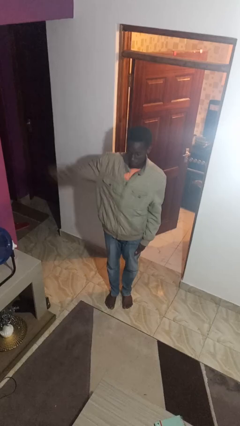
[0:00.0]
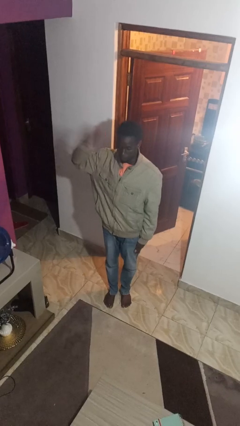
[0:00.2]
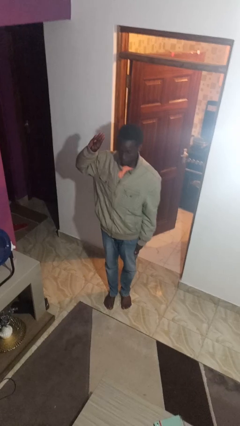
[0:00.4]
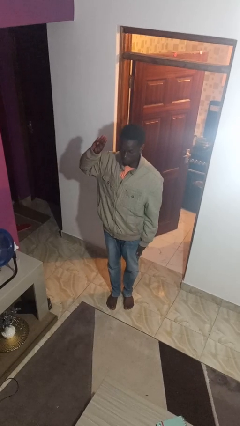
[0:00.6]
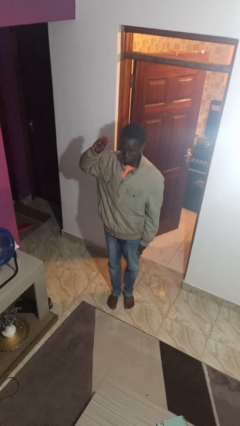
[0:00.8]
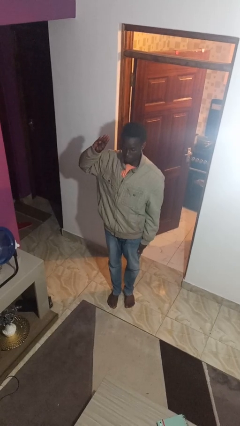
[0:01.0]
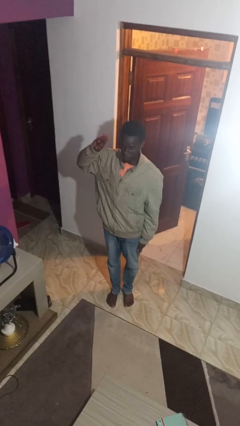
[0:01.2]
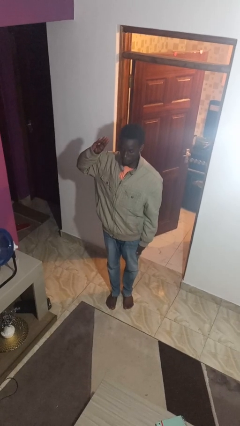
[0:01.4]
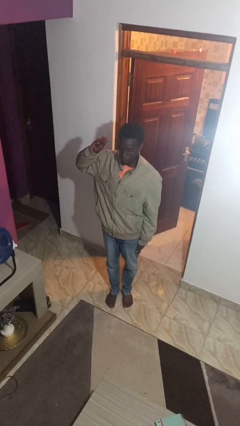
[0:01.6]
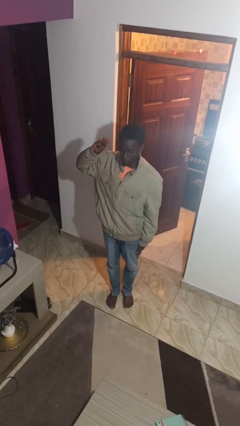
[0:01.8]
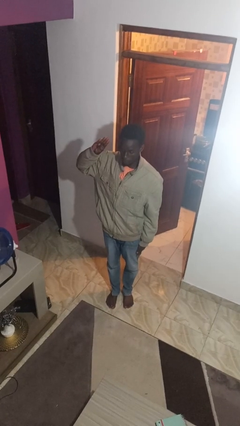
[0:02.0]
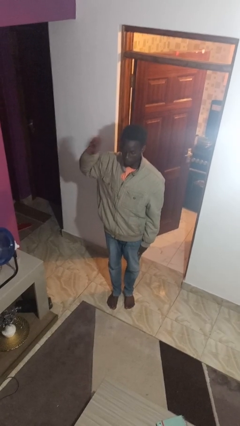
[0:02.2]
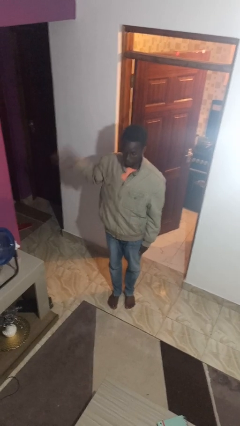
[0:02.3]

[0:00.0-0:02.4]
person salutes

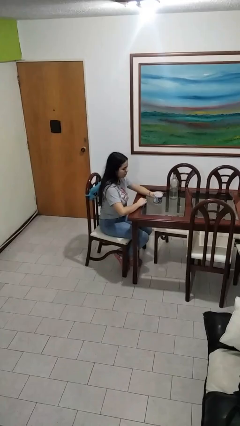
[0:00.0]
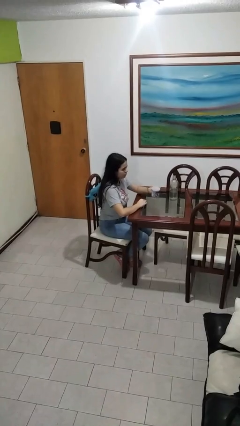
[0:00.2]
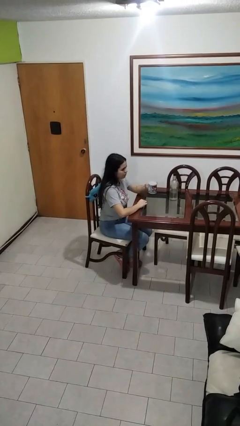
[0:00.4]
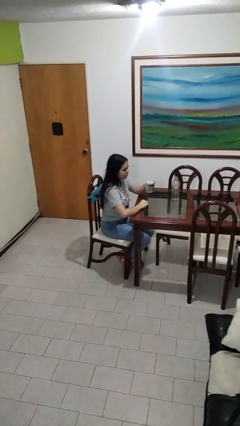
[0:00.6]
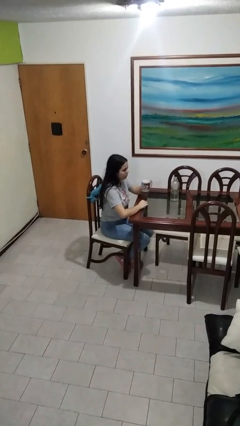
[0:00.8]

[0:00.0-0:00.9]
person picks up object from table

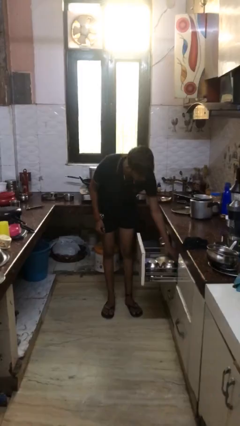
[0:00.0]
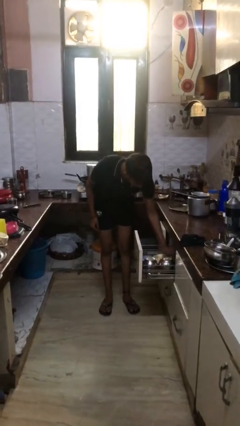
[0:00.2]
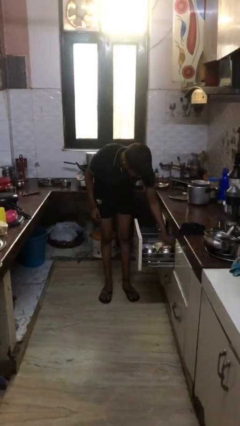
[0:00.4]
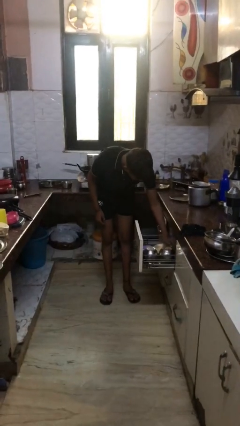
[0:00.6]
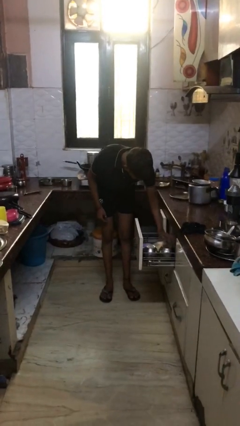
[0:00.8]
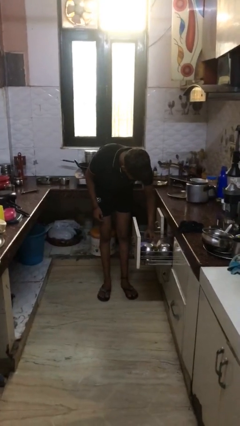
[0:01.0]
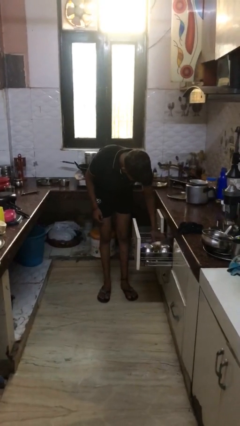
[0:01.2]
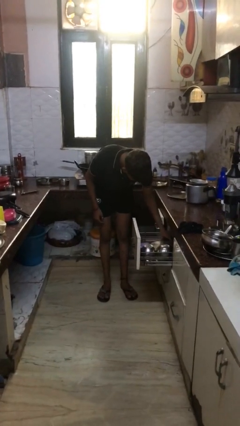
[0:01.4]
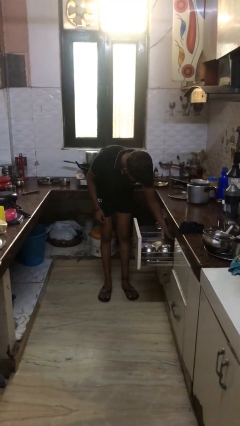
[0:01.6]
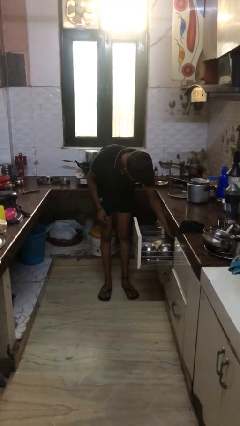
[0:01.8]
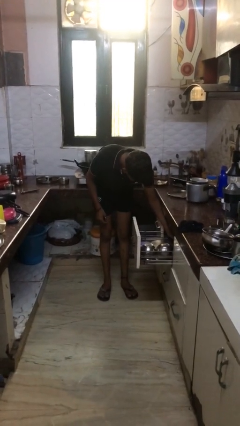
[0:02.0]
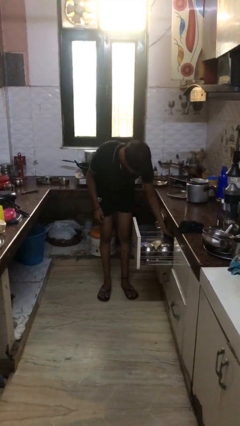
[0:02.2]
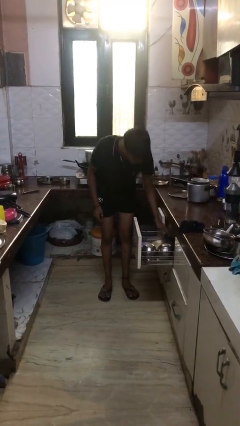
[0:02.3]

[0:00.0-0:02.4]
person searches in kitchen drawer

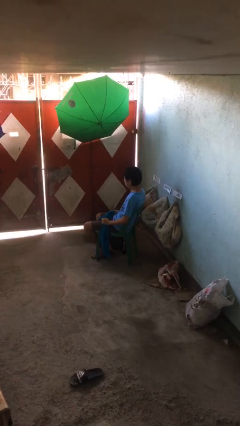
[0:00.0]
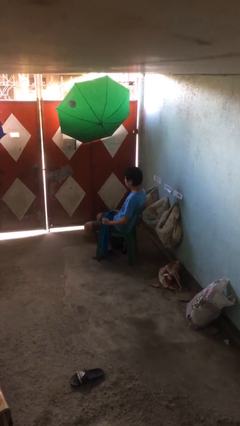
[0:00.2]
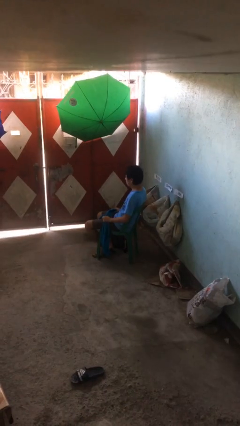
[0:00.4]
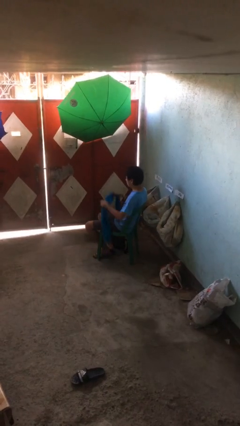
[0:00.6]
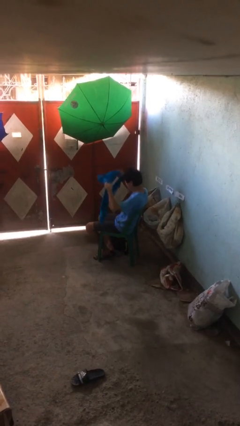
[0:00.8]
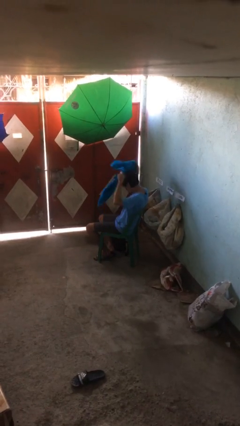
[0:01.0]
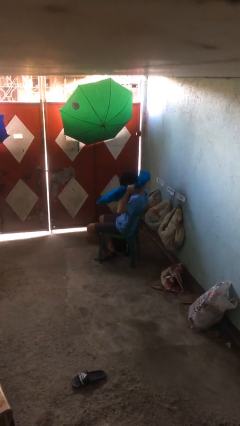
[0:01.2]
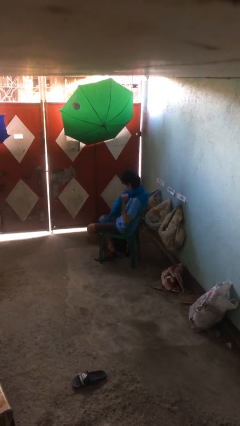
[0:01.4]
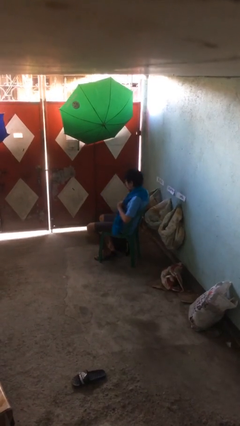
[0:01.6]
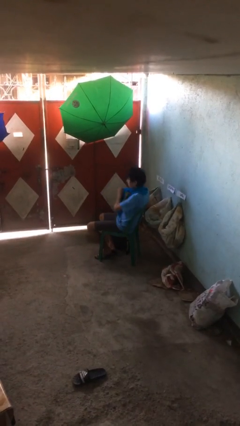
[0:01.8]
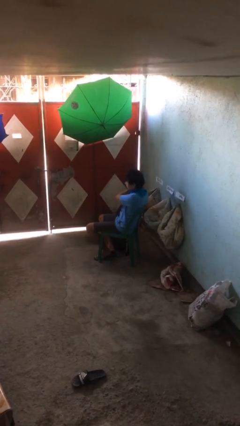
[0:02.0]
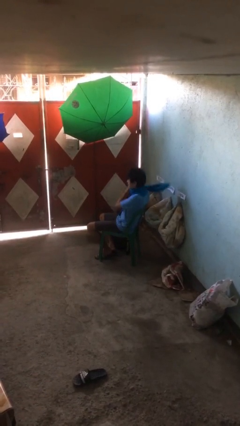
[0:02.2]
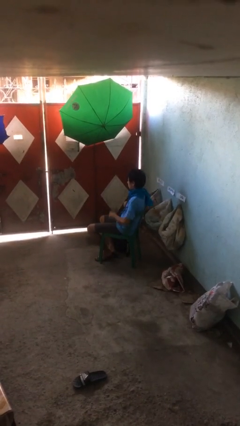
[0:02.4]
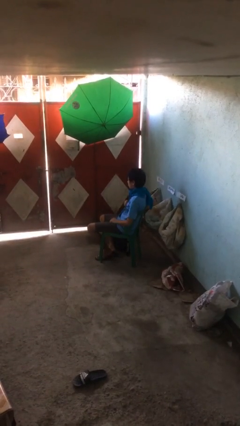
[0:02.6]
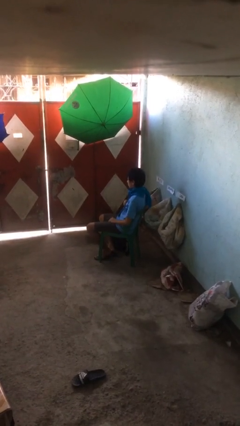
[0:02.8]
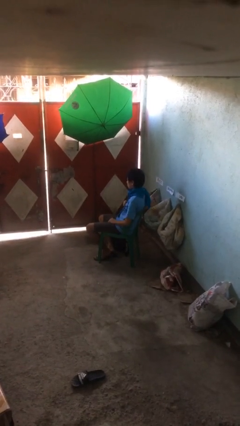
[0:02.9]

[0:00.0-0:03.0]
person puts on scarf

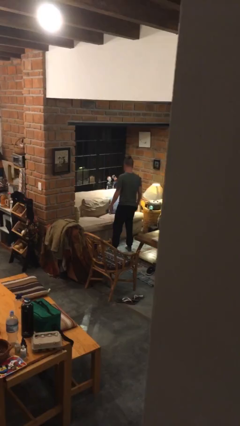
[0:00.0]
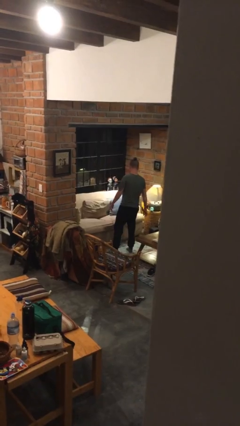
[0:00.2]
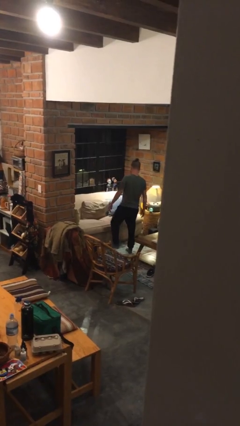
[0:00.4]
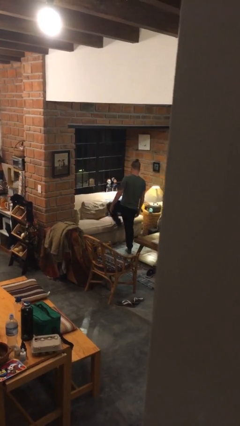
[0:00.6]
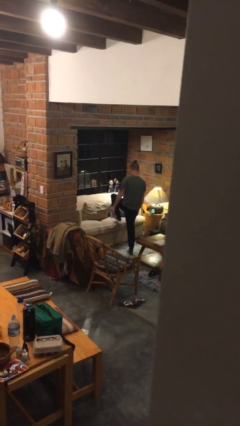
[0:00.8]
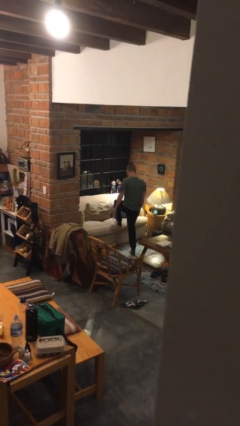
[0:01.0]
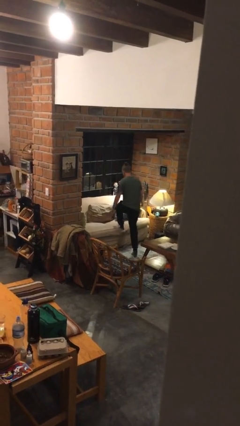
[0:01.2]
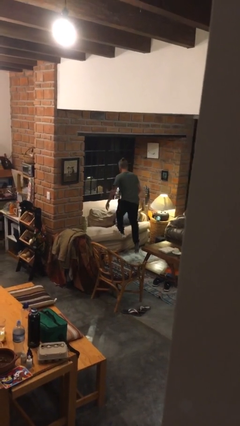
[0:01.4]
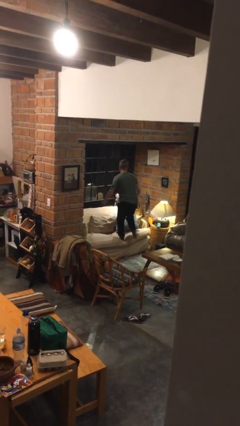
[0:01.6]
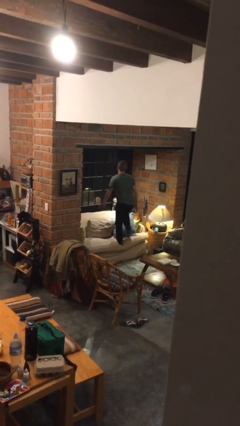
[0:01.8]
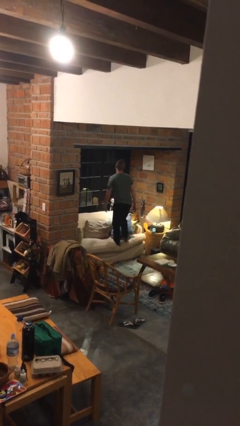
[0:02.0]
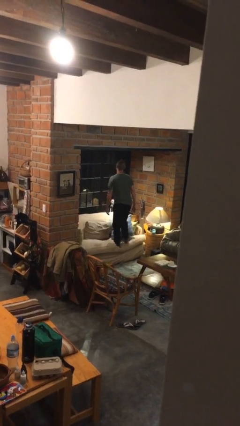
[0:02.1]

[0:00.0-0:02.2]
person climbs on couch

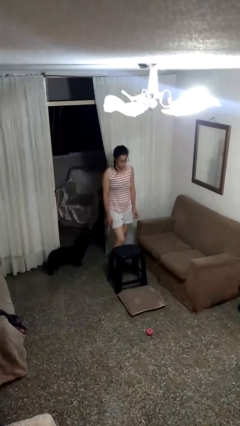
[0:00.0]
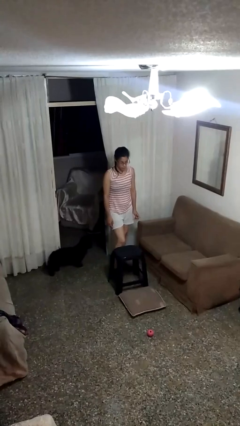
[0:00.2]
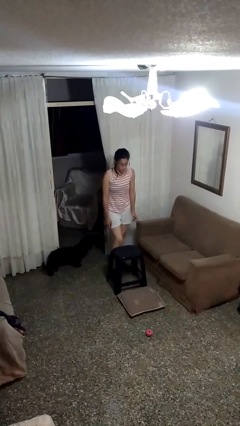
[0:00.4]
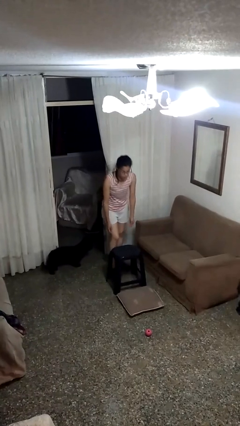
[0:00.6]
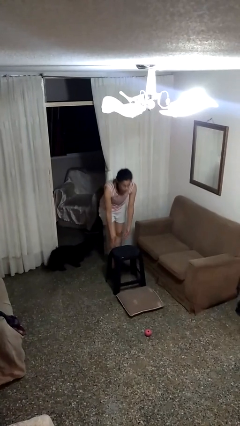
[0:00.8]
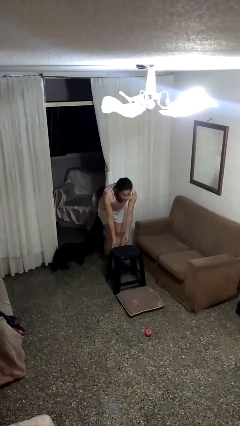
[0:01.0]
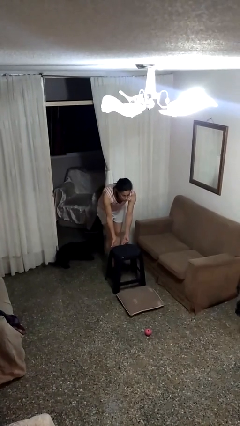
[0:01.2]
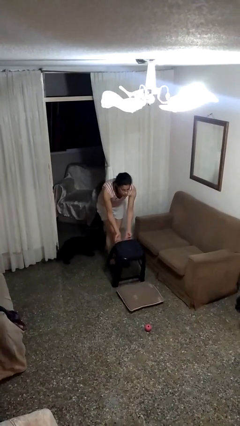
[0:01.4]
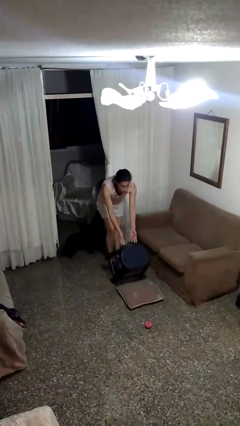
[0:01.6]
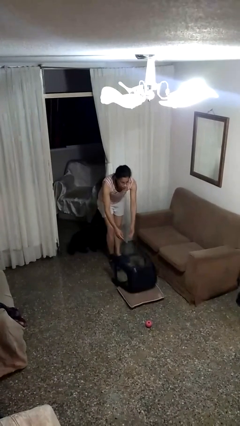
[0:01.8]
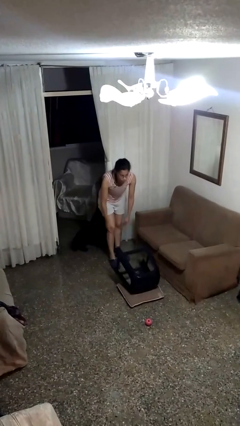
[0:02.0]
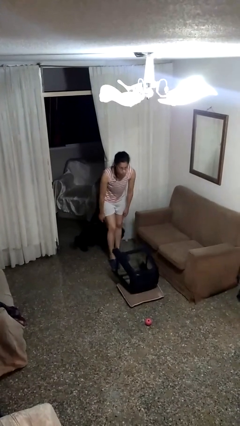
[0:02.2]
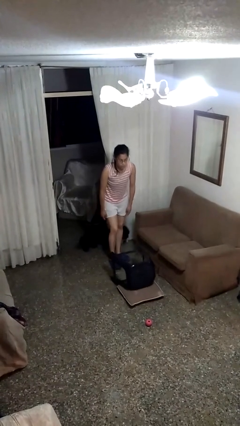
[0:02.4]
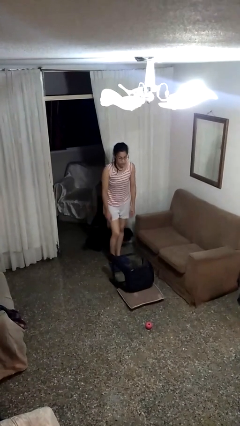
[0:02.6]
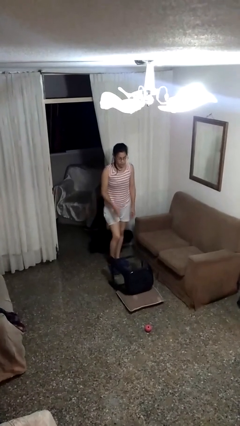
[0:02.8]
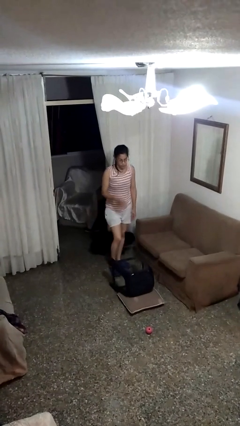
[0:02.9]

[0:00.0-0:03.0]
person knocks over furniture

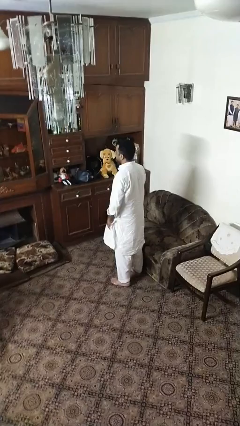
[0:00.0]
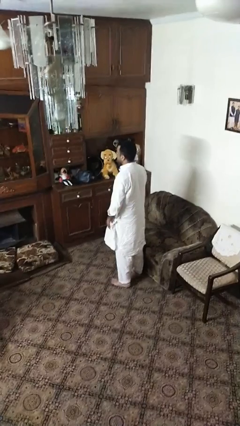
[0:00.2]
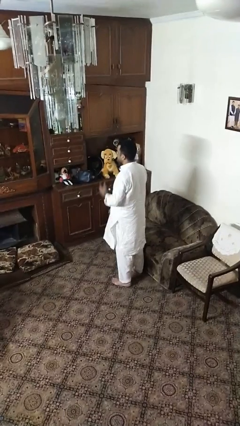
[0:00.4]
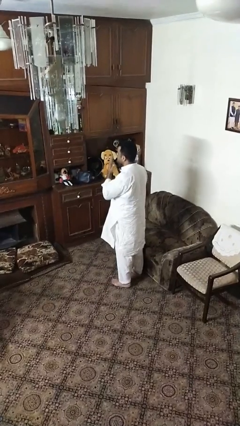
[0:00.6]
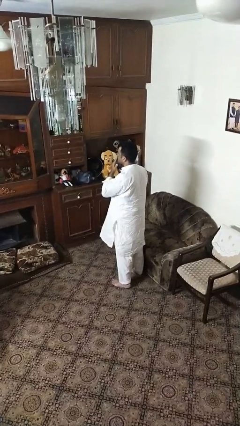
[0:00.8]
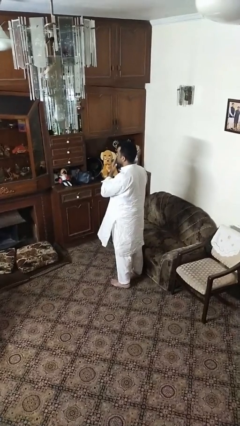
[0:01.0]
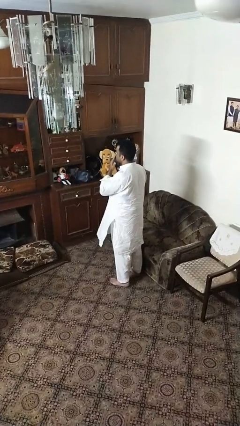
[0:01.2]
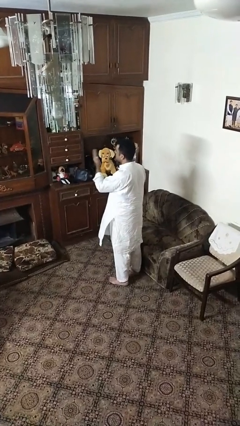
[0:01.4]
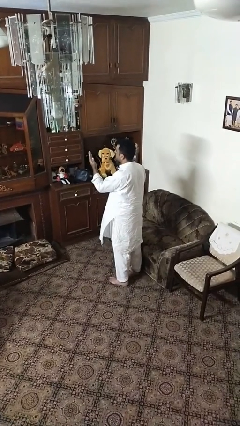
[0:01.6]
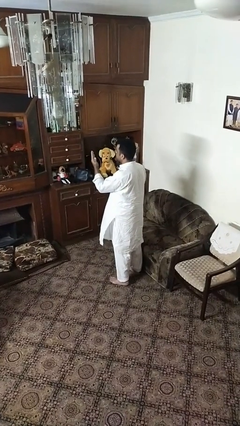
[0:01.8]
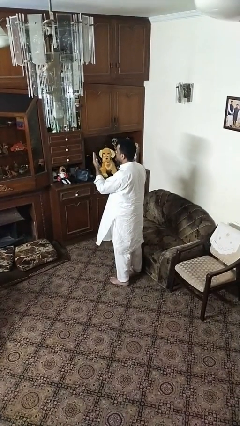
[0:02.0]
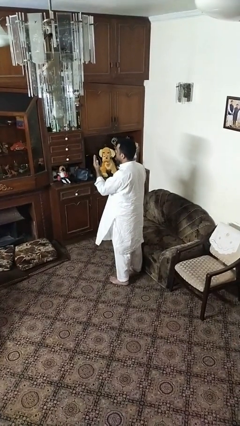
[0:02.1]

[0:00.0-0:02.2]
person gestures blow kiss

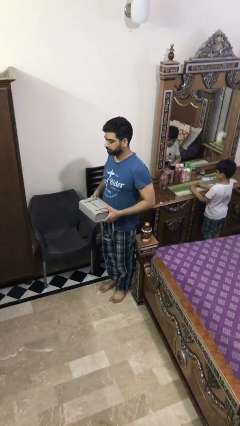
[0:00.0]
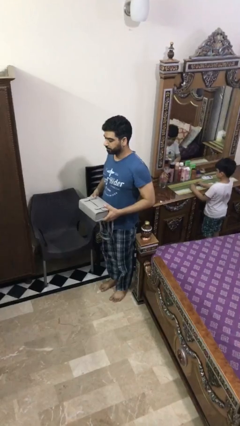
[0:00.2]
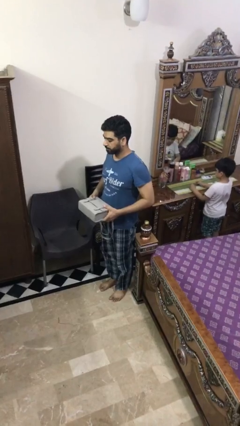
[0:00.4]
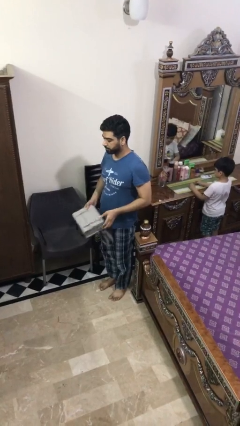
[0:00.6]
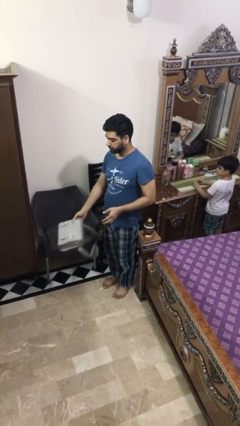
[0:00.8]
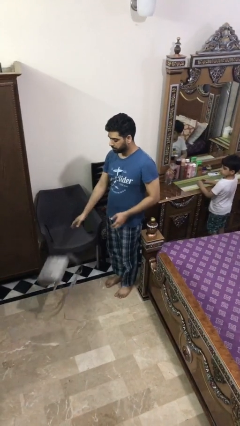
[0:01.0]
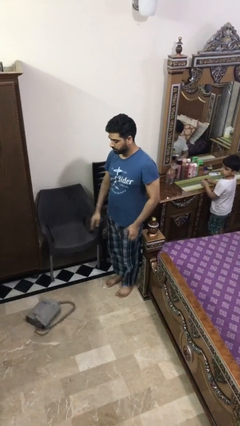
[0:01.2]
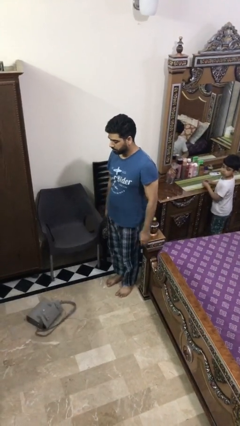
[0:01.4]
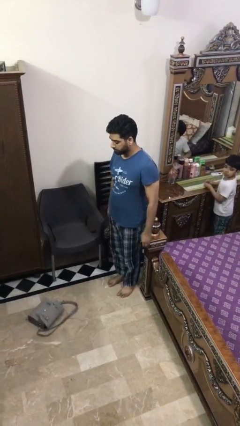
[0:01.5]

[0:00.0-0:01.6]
person throws object to ground
